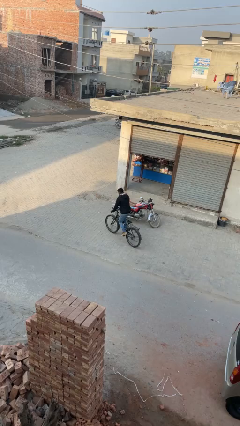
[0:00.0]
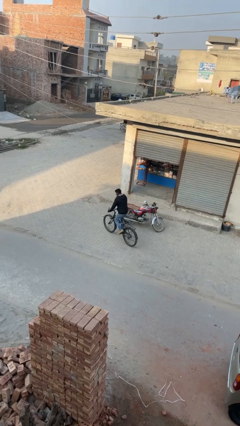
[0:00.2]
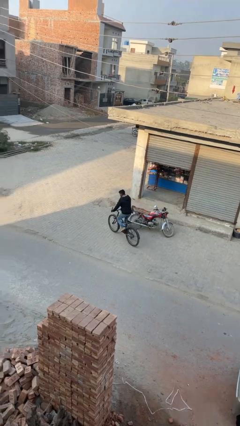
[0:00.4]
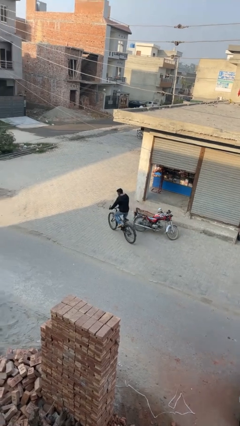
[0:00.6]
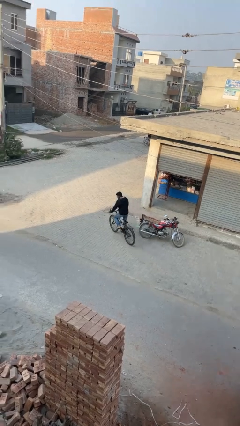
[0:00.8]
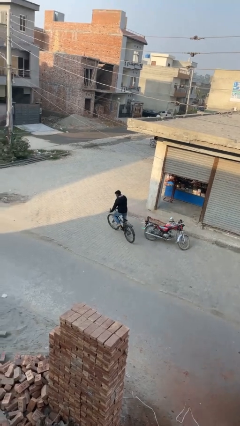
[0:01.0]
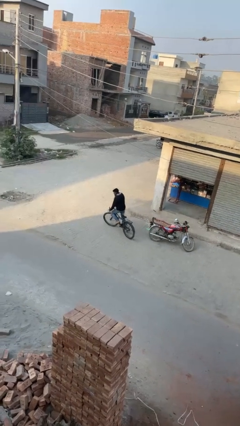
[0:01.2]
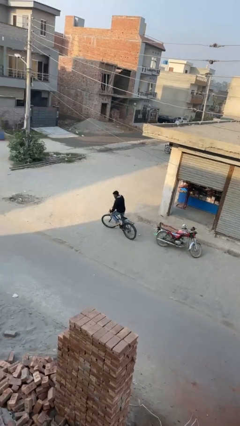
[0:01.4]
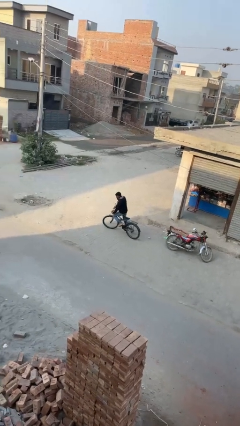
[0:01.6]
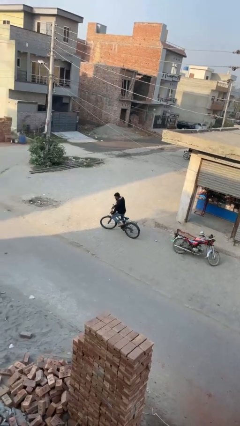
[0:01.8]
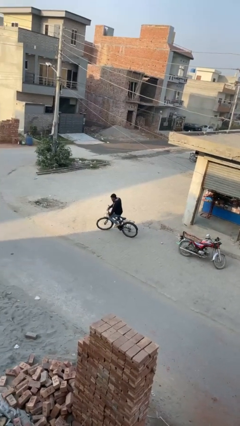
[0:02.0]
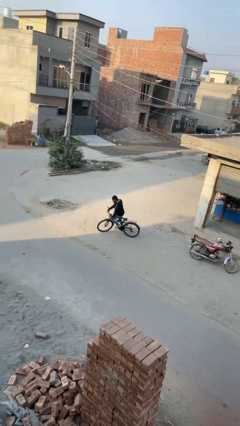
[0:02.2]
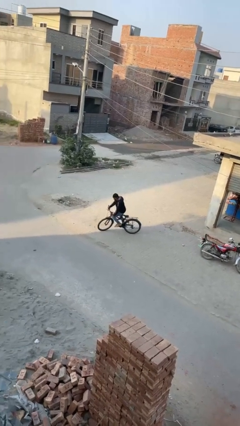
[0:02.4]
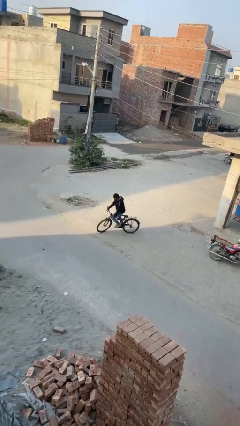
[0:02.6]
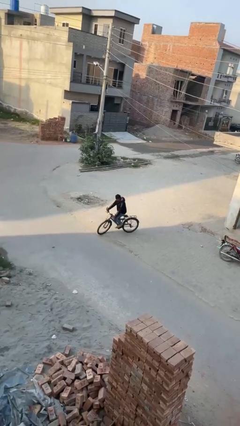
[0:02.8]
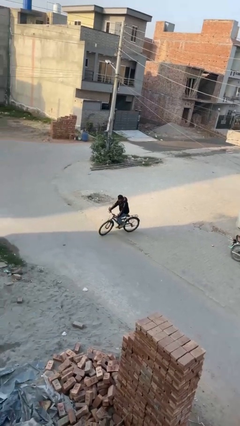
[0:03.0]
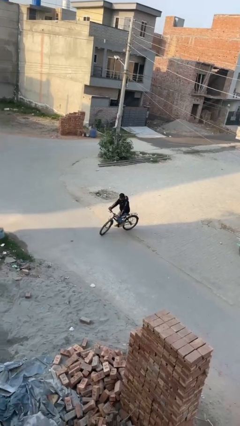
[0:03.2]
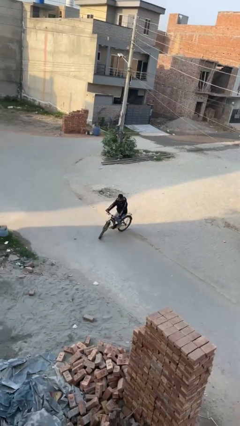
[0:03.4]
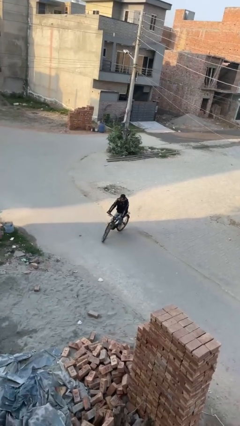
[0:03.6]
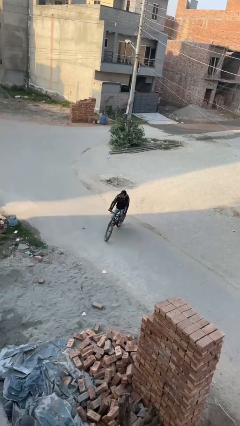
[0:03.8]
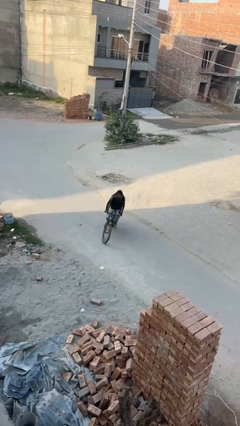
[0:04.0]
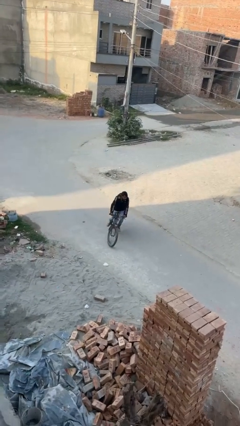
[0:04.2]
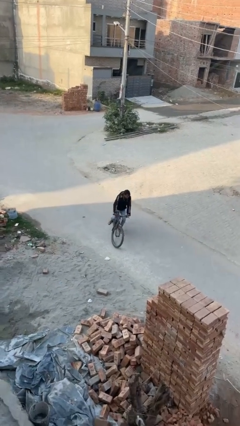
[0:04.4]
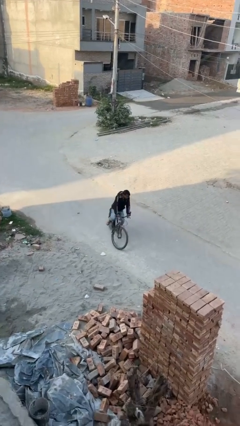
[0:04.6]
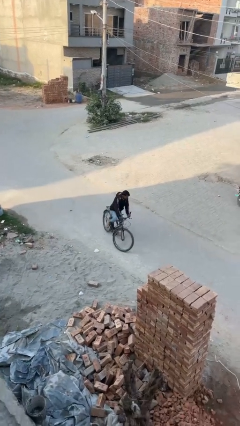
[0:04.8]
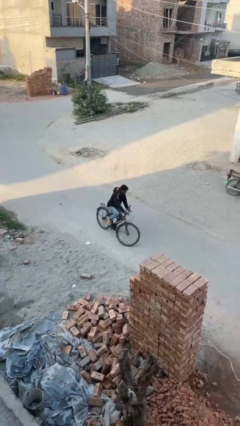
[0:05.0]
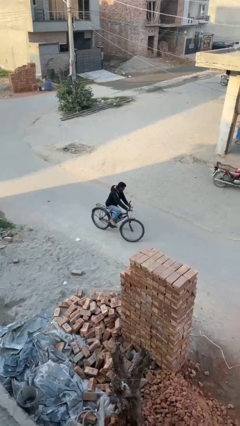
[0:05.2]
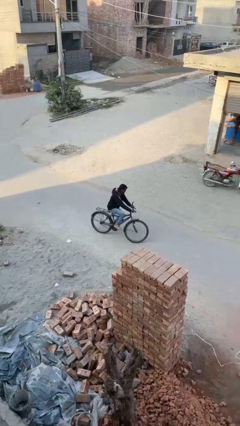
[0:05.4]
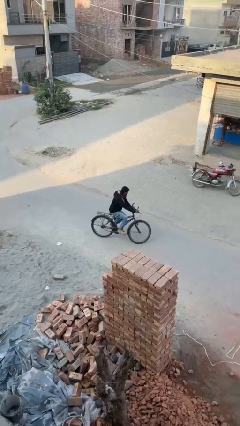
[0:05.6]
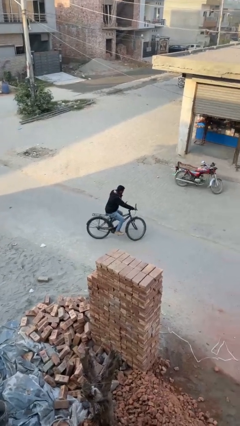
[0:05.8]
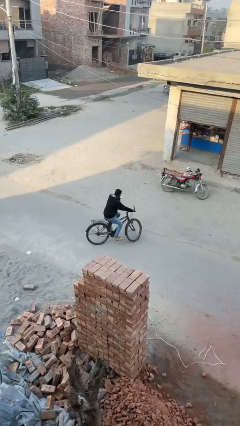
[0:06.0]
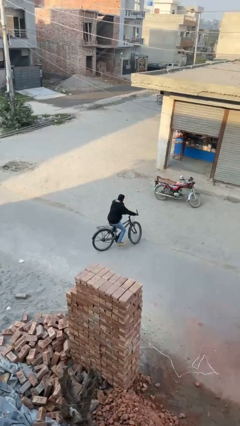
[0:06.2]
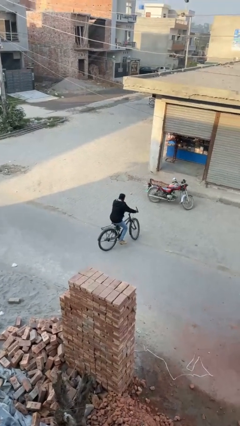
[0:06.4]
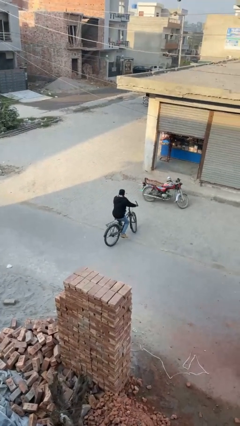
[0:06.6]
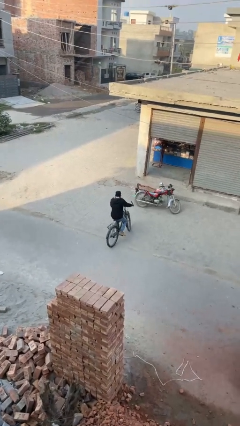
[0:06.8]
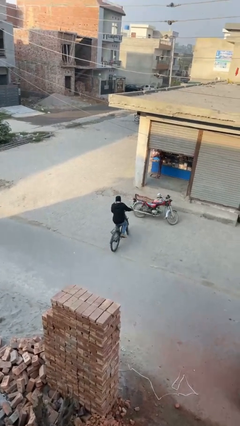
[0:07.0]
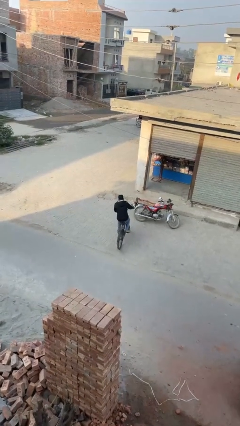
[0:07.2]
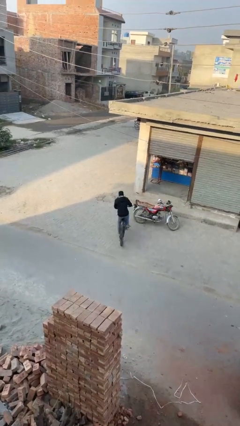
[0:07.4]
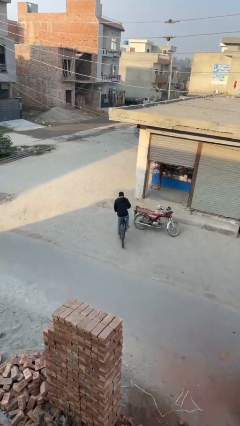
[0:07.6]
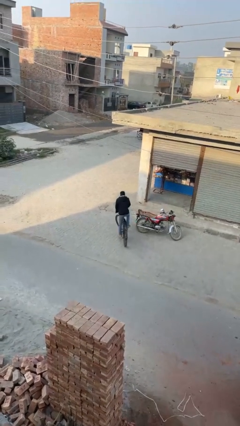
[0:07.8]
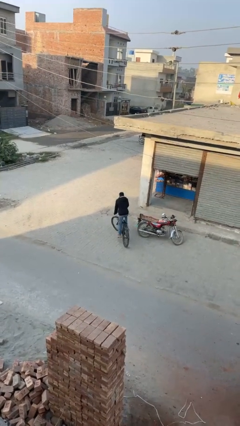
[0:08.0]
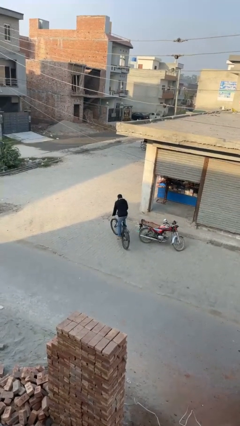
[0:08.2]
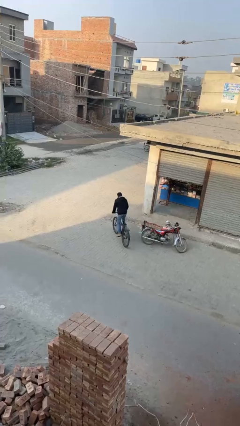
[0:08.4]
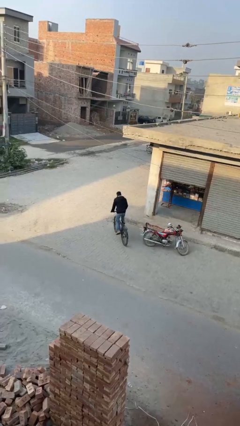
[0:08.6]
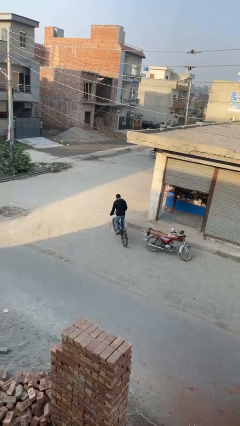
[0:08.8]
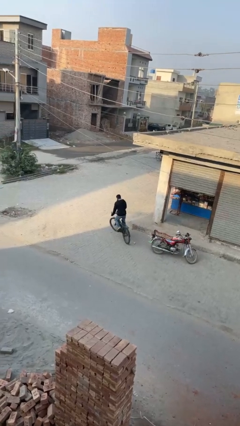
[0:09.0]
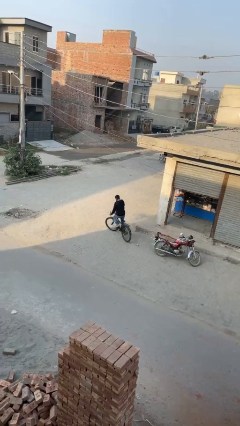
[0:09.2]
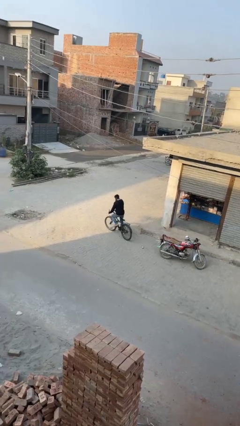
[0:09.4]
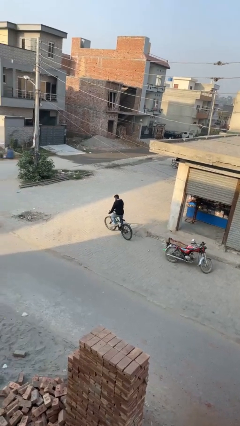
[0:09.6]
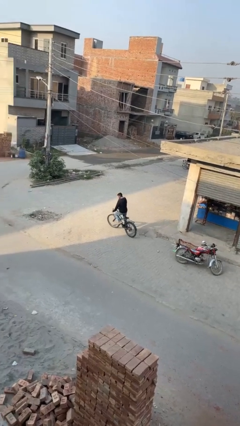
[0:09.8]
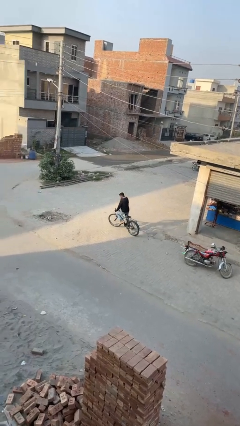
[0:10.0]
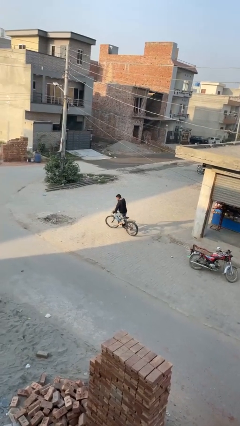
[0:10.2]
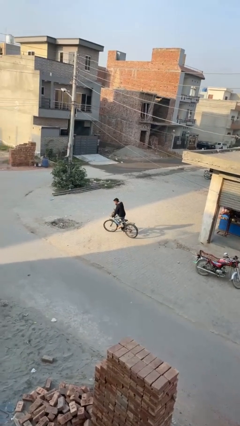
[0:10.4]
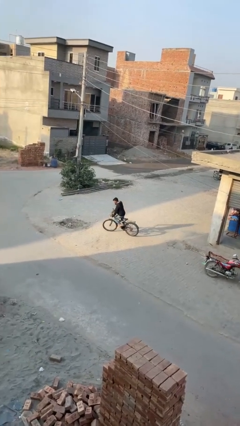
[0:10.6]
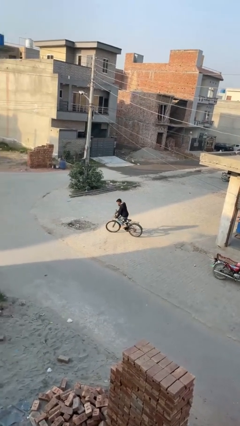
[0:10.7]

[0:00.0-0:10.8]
person rides bicycle

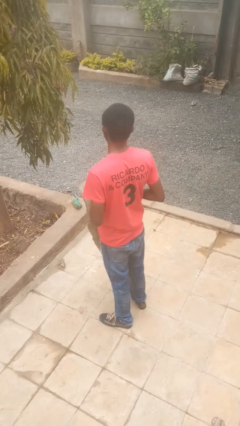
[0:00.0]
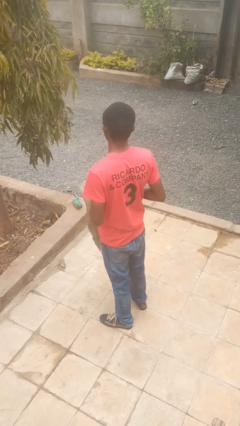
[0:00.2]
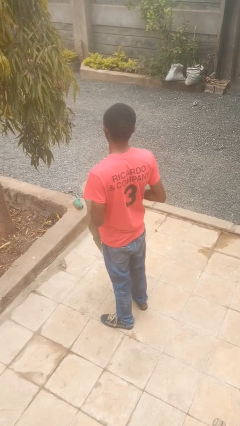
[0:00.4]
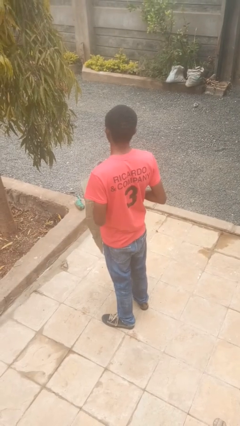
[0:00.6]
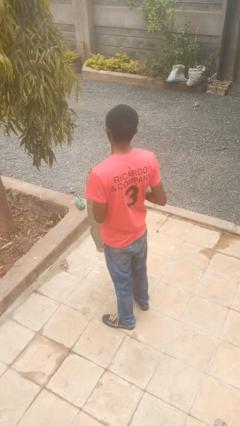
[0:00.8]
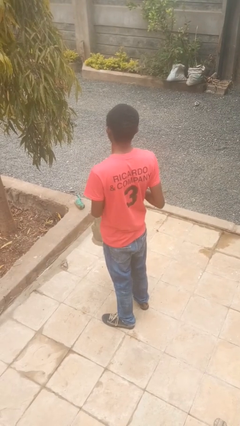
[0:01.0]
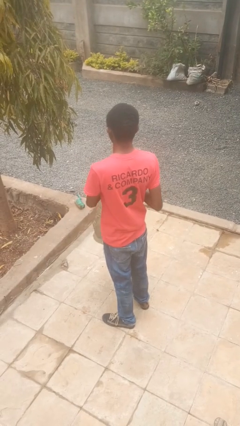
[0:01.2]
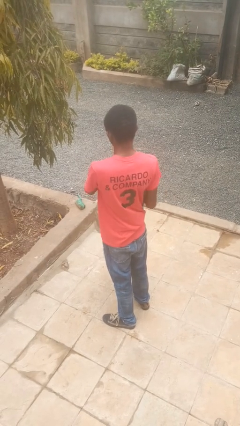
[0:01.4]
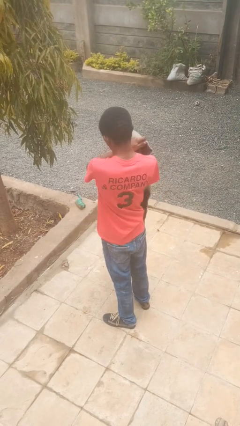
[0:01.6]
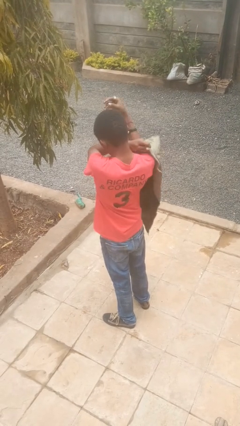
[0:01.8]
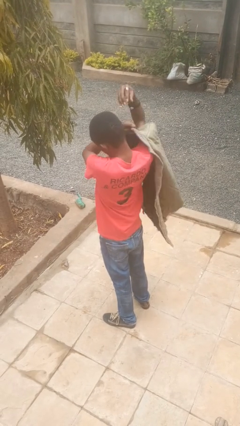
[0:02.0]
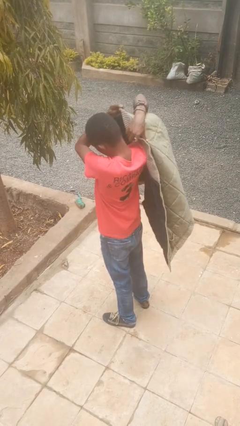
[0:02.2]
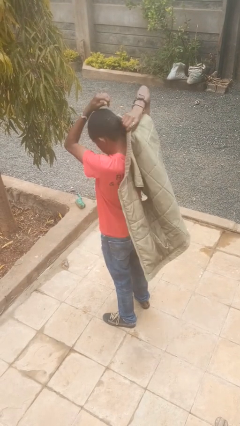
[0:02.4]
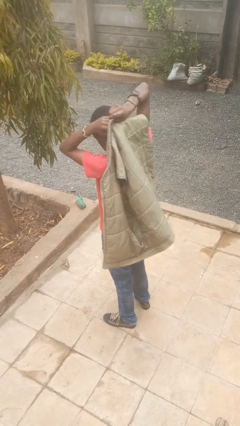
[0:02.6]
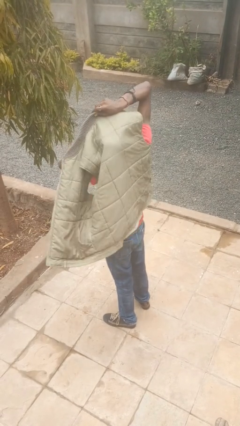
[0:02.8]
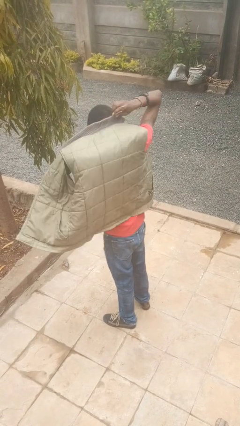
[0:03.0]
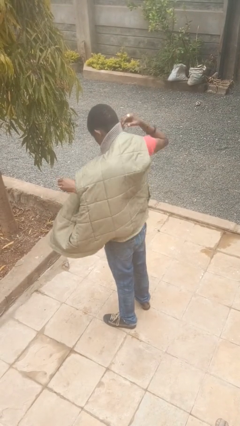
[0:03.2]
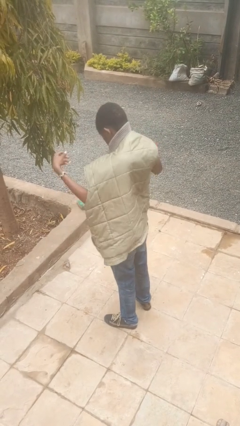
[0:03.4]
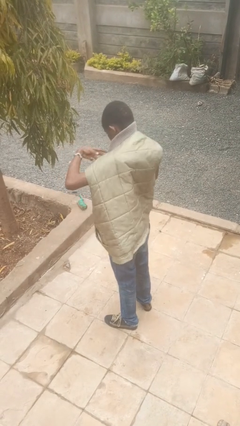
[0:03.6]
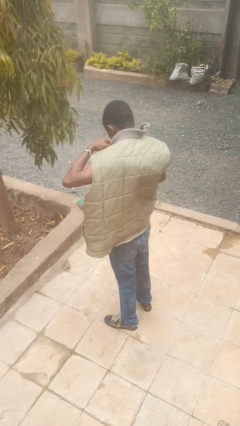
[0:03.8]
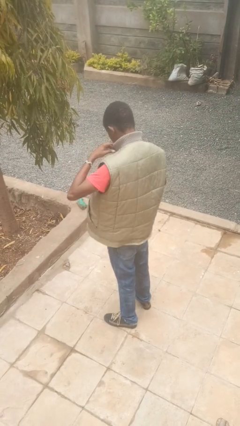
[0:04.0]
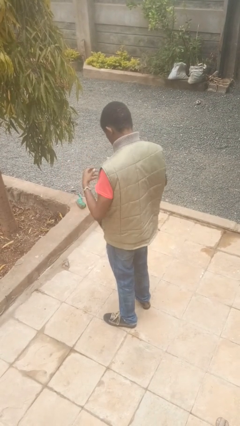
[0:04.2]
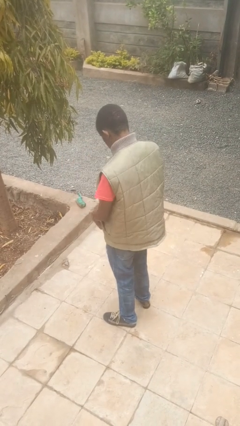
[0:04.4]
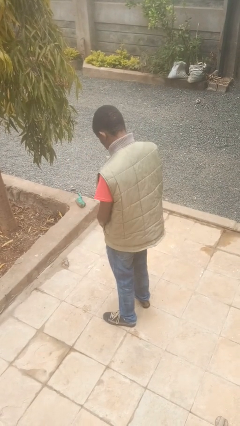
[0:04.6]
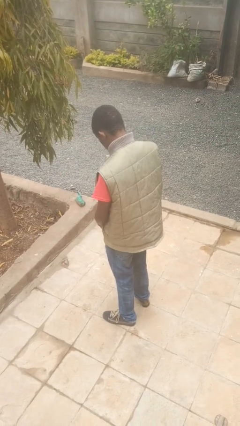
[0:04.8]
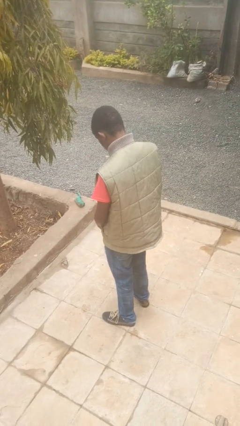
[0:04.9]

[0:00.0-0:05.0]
person puts on jacket

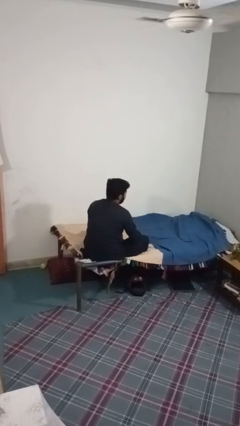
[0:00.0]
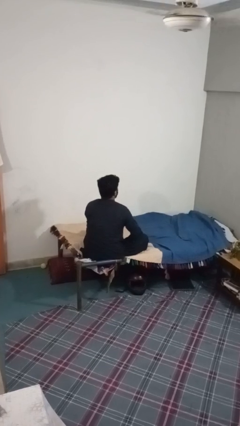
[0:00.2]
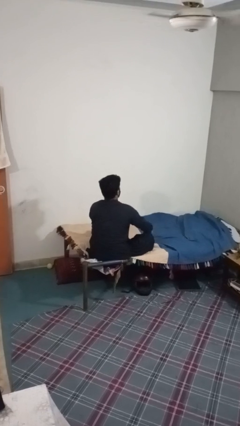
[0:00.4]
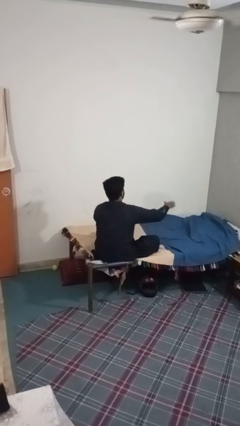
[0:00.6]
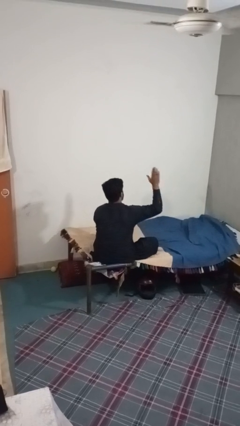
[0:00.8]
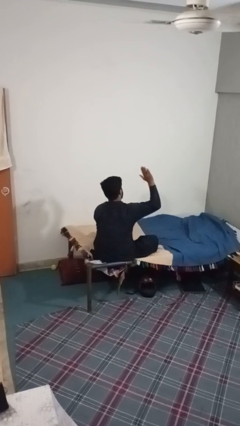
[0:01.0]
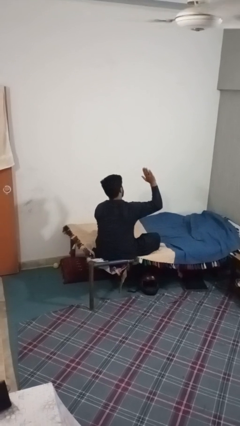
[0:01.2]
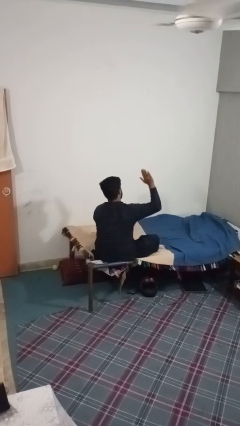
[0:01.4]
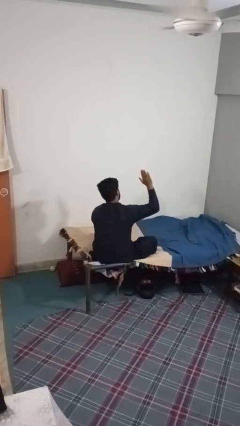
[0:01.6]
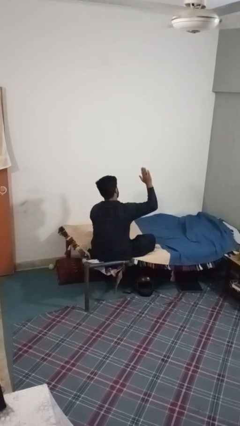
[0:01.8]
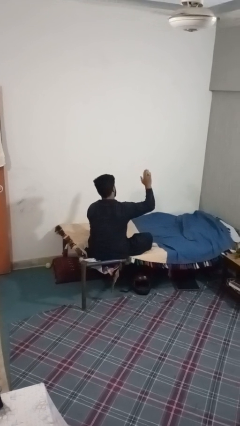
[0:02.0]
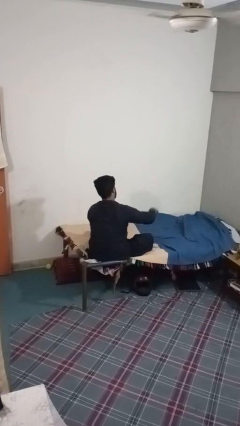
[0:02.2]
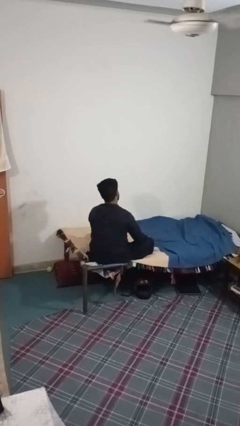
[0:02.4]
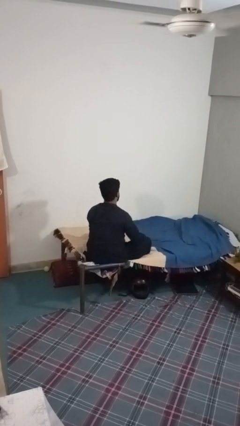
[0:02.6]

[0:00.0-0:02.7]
person gestures stop
